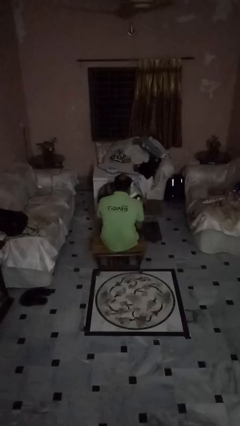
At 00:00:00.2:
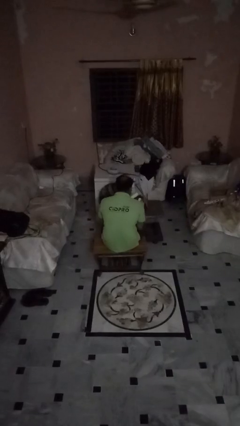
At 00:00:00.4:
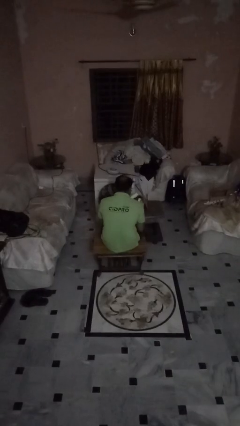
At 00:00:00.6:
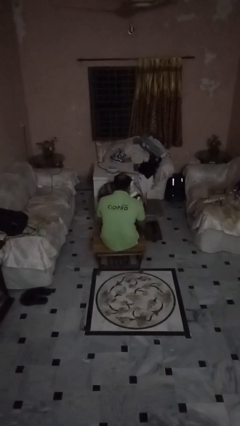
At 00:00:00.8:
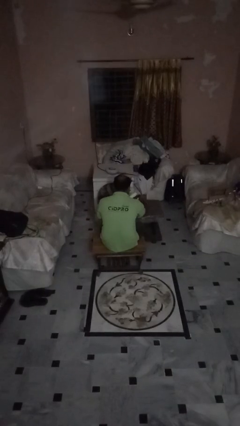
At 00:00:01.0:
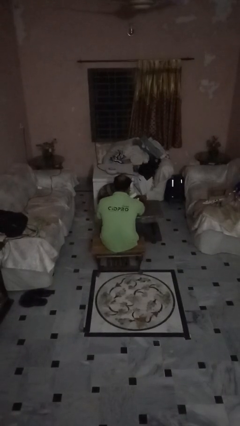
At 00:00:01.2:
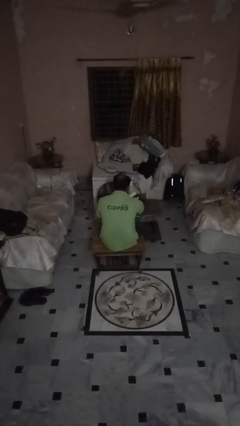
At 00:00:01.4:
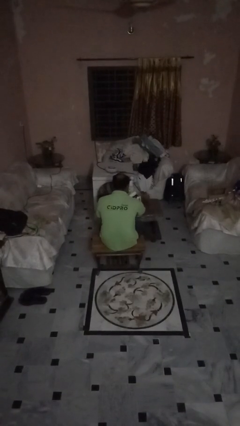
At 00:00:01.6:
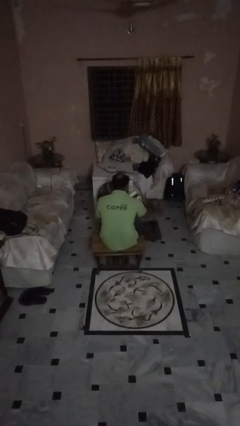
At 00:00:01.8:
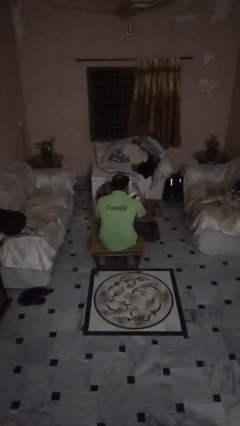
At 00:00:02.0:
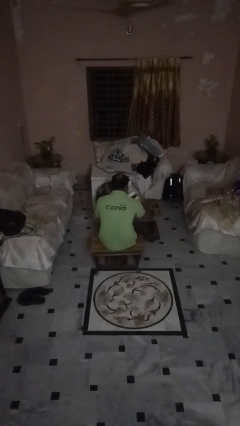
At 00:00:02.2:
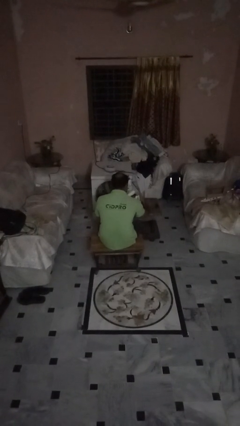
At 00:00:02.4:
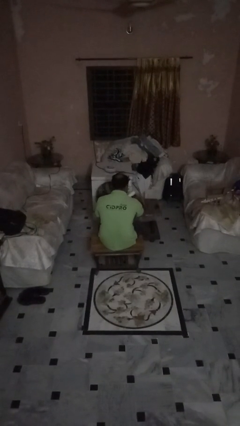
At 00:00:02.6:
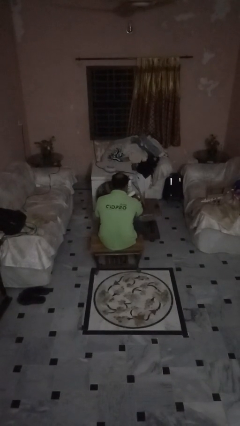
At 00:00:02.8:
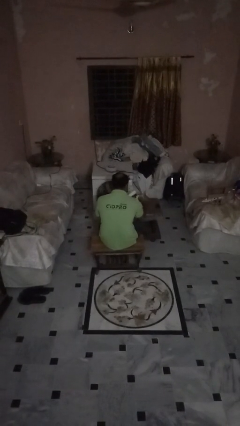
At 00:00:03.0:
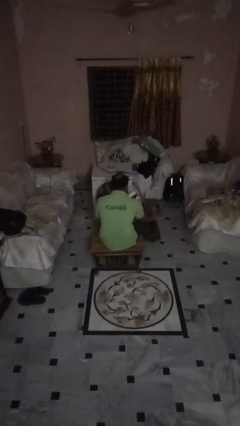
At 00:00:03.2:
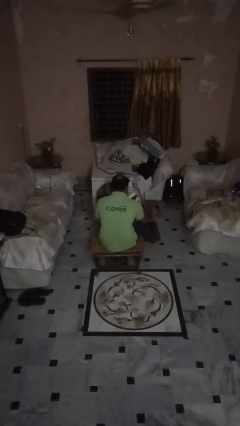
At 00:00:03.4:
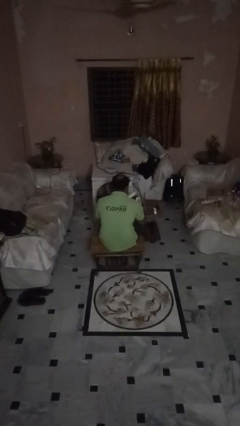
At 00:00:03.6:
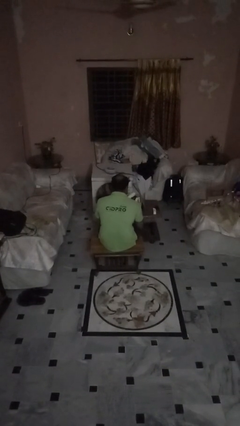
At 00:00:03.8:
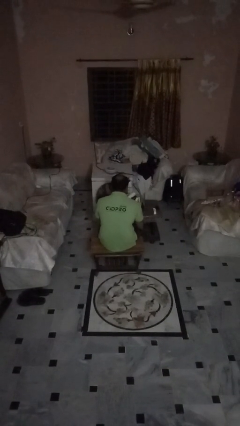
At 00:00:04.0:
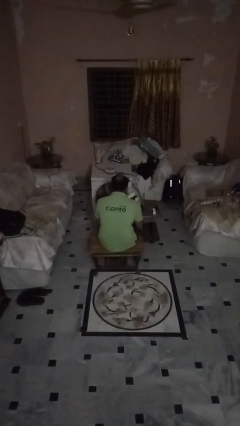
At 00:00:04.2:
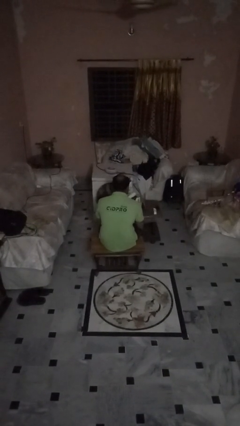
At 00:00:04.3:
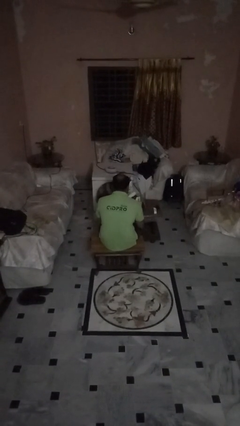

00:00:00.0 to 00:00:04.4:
person unloads box onto table

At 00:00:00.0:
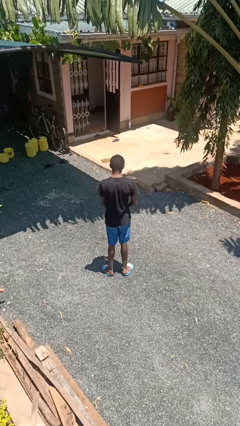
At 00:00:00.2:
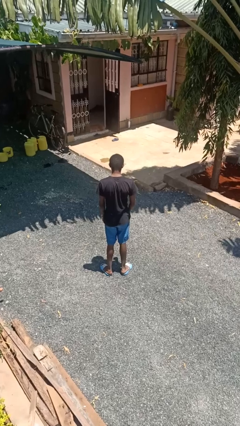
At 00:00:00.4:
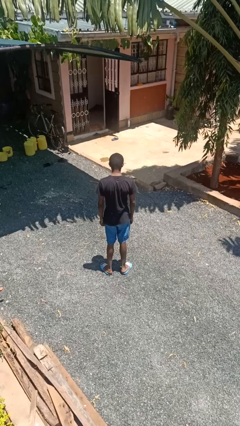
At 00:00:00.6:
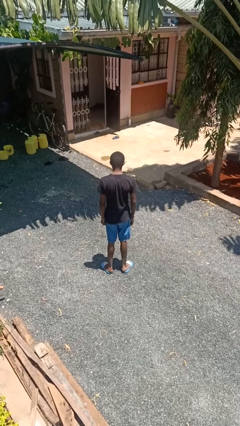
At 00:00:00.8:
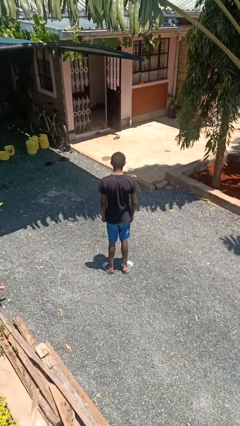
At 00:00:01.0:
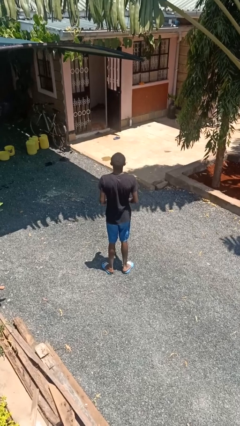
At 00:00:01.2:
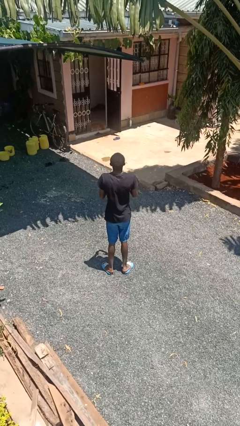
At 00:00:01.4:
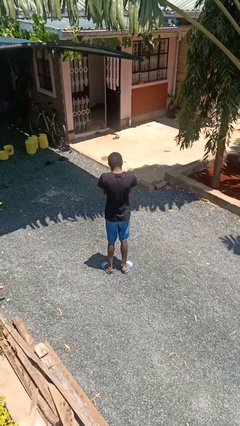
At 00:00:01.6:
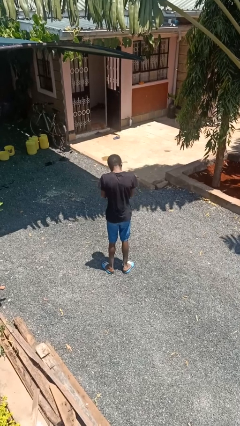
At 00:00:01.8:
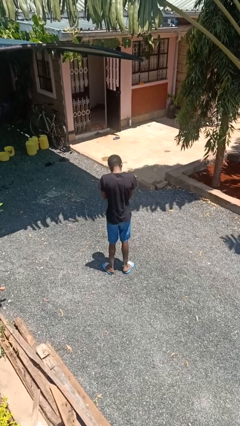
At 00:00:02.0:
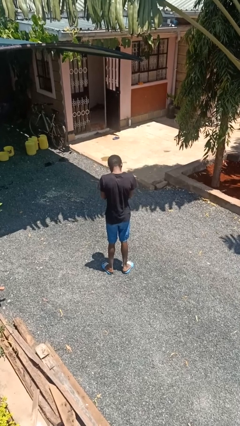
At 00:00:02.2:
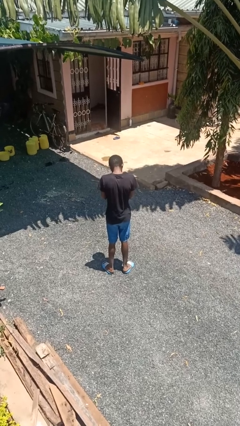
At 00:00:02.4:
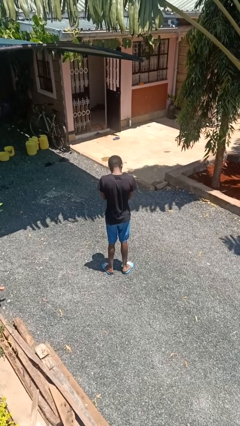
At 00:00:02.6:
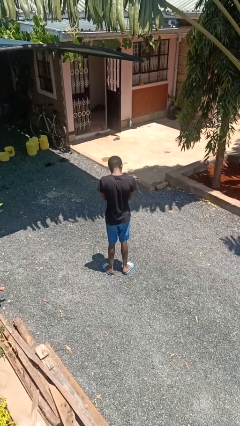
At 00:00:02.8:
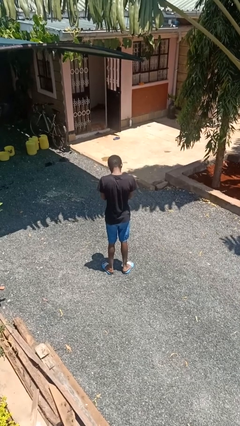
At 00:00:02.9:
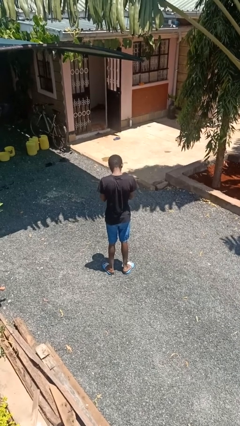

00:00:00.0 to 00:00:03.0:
person sneezes into hand

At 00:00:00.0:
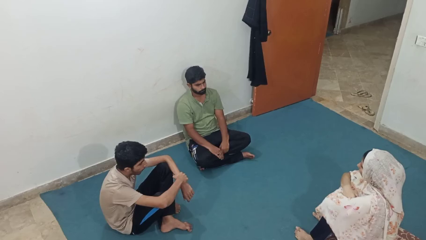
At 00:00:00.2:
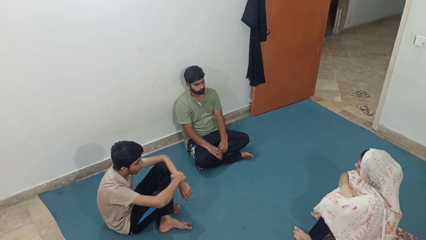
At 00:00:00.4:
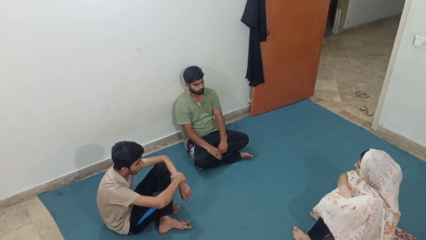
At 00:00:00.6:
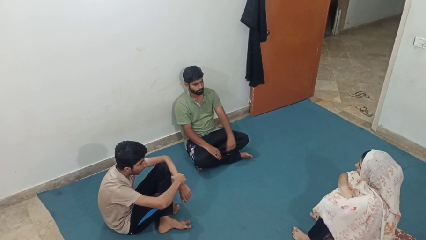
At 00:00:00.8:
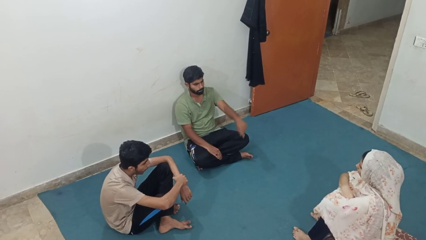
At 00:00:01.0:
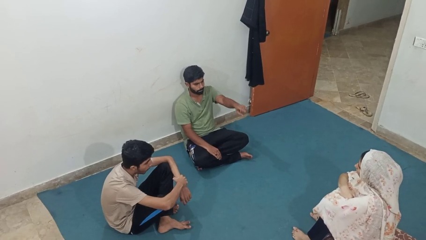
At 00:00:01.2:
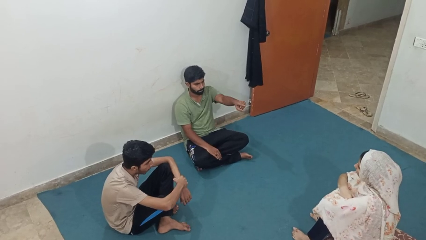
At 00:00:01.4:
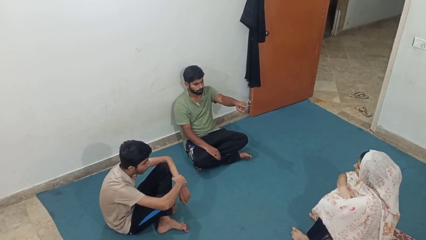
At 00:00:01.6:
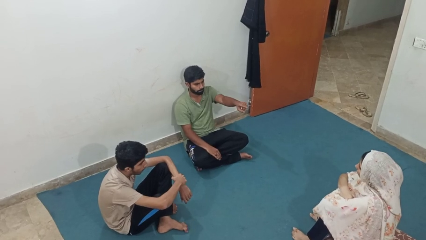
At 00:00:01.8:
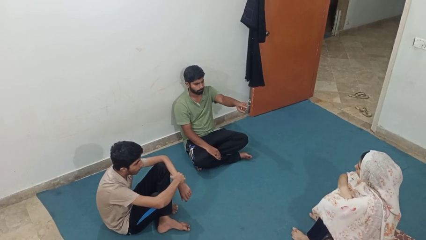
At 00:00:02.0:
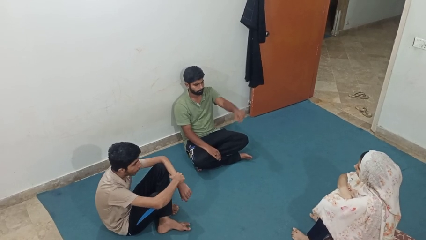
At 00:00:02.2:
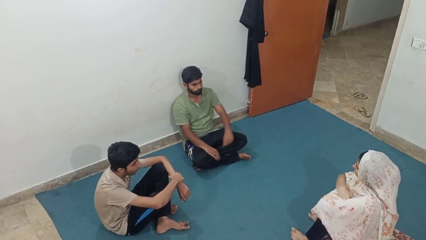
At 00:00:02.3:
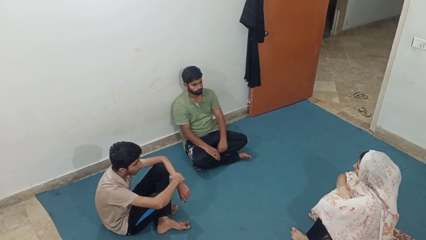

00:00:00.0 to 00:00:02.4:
person points at person

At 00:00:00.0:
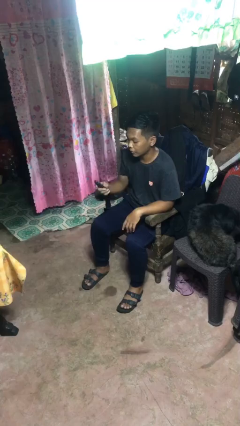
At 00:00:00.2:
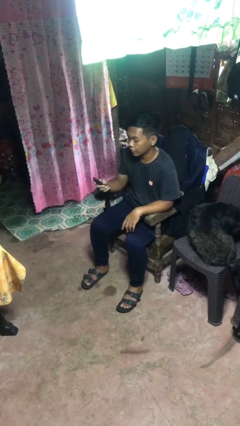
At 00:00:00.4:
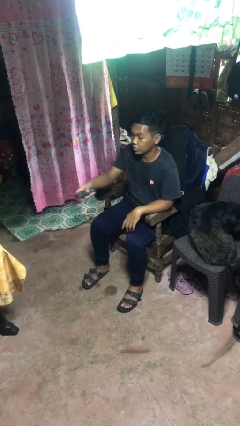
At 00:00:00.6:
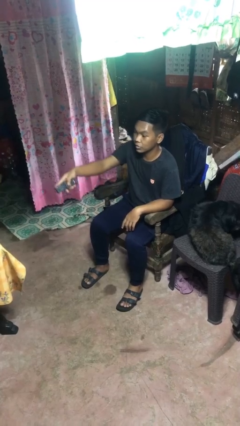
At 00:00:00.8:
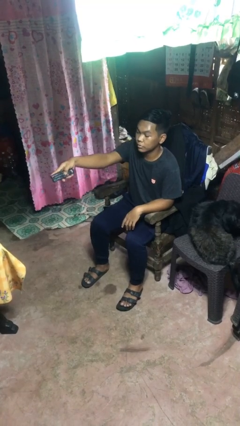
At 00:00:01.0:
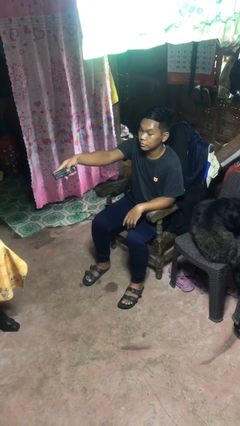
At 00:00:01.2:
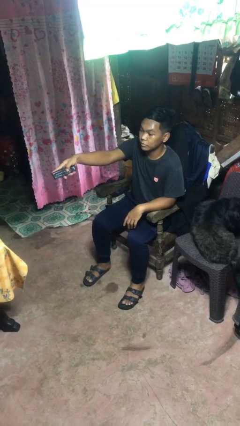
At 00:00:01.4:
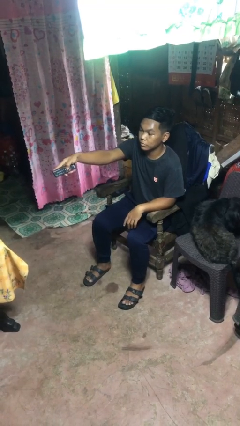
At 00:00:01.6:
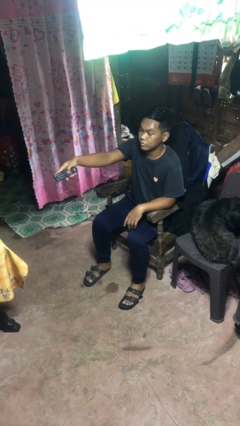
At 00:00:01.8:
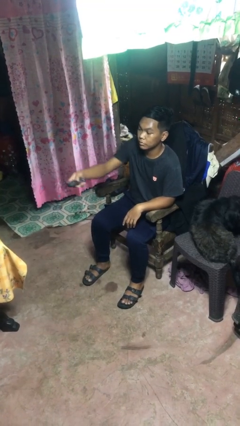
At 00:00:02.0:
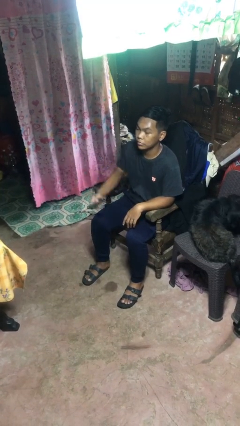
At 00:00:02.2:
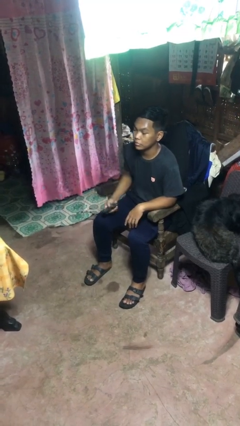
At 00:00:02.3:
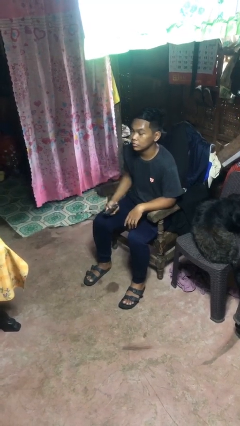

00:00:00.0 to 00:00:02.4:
person uses television remote

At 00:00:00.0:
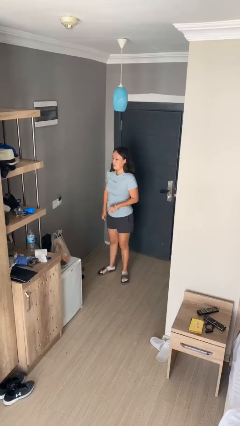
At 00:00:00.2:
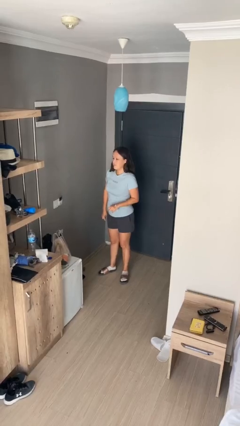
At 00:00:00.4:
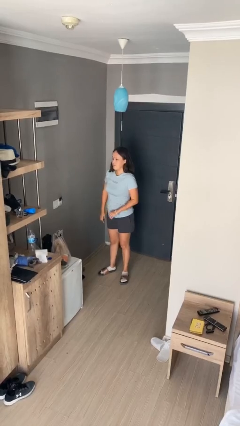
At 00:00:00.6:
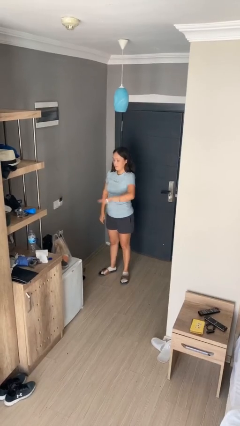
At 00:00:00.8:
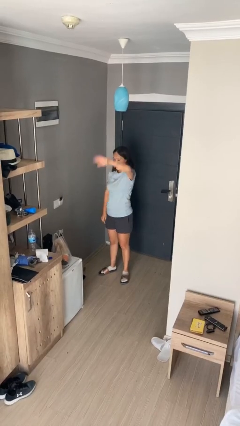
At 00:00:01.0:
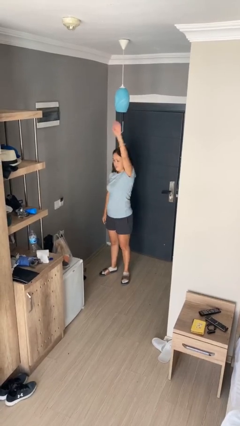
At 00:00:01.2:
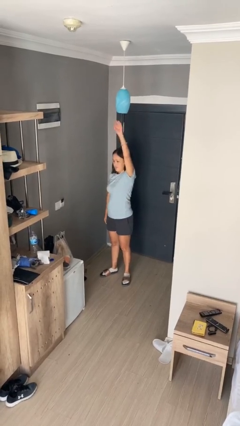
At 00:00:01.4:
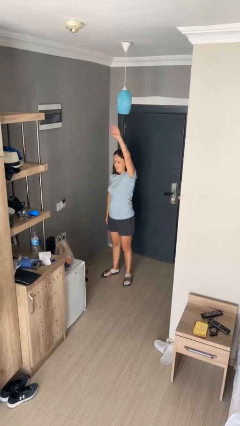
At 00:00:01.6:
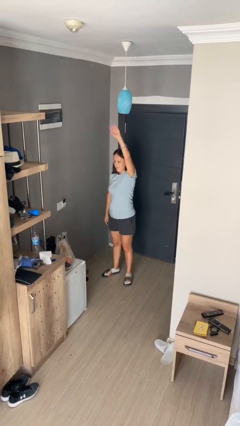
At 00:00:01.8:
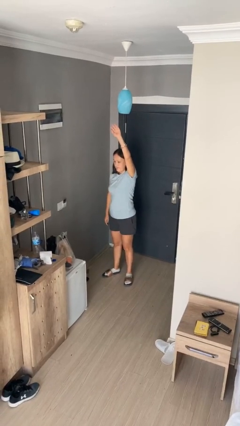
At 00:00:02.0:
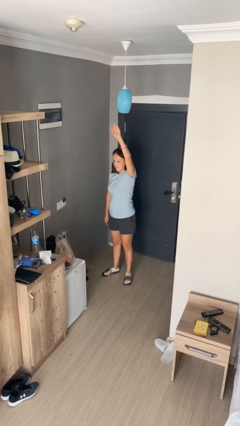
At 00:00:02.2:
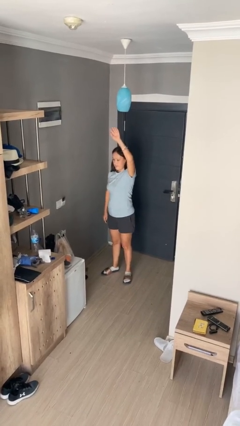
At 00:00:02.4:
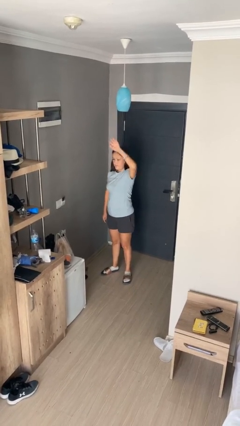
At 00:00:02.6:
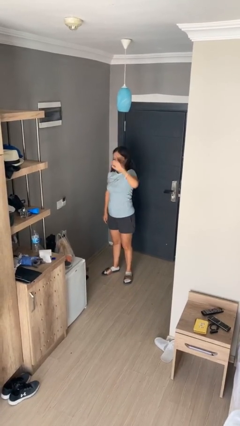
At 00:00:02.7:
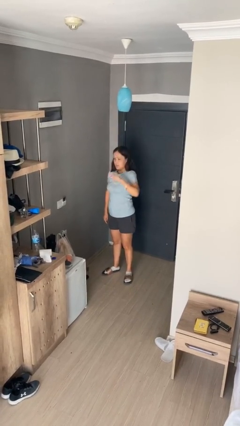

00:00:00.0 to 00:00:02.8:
person gestures swipe up

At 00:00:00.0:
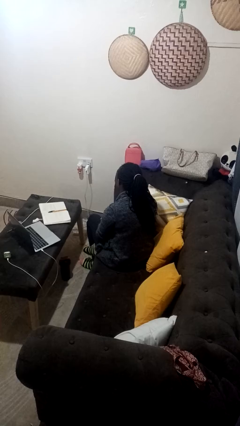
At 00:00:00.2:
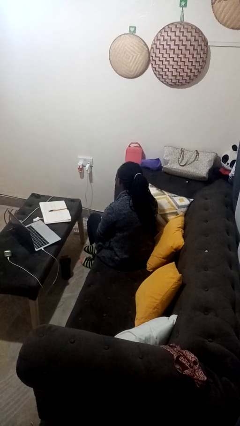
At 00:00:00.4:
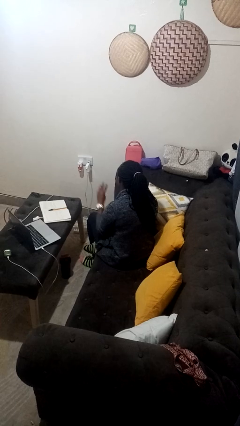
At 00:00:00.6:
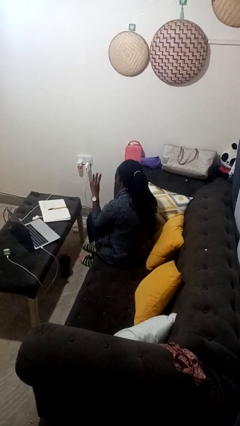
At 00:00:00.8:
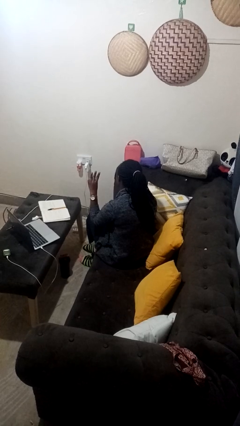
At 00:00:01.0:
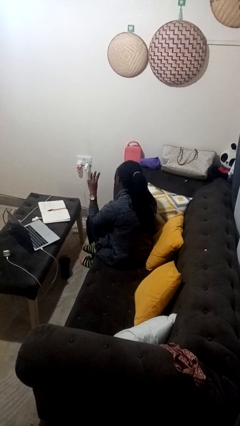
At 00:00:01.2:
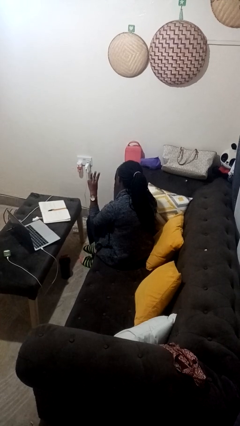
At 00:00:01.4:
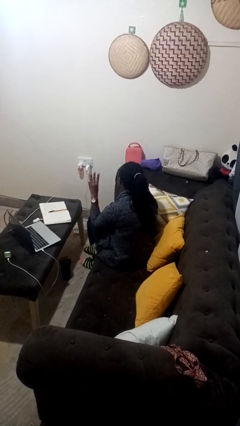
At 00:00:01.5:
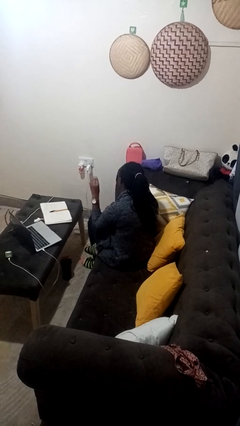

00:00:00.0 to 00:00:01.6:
person gestures number three

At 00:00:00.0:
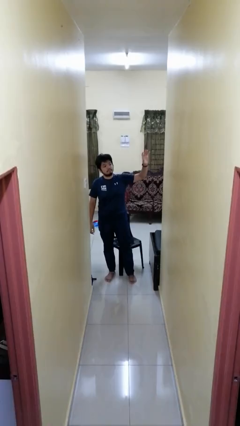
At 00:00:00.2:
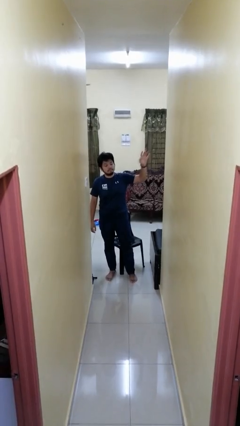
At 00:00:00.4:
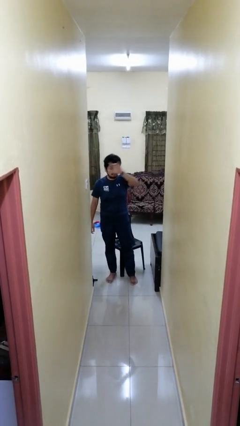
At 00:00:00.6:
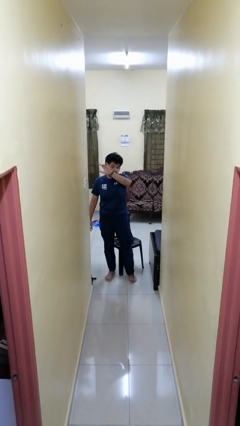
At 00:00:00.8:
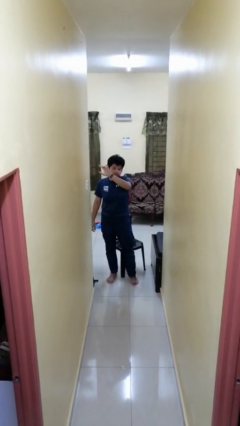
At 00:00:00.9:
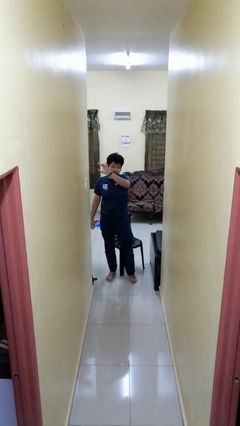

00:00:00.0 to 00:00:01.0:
person gestures swipe right
